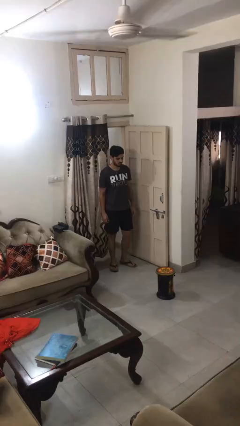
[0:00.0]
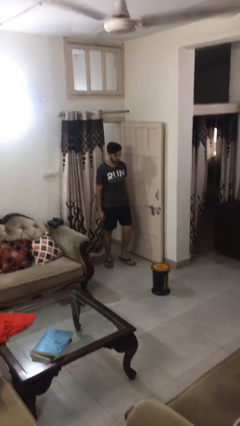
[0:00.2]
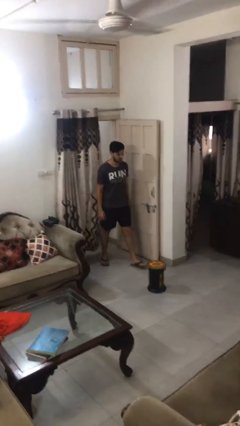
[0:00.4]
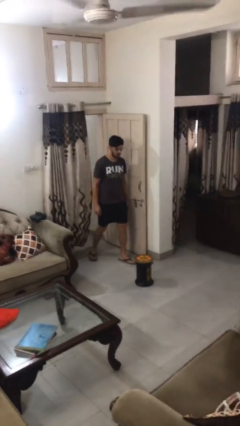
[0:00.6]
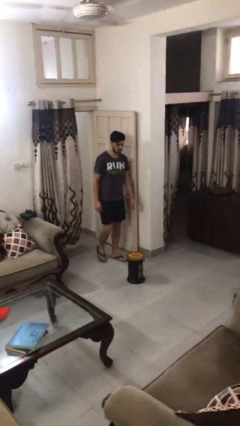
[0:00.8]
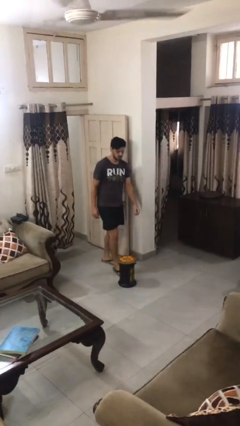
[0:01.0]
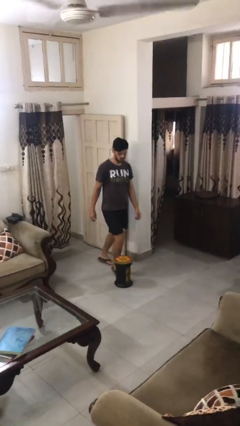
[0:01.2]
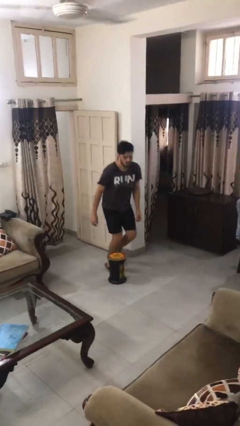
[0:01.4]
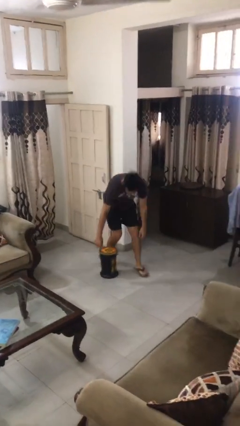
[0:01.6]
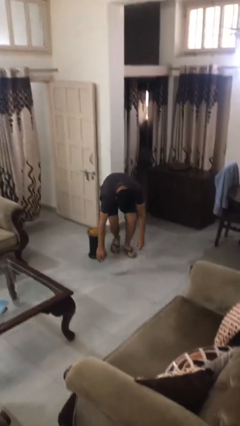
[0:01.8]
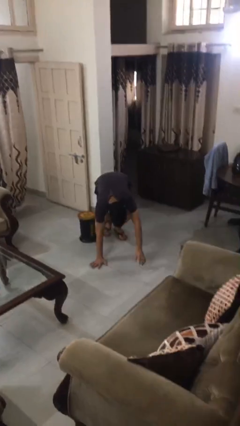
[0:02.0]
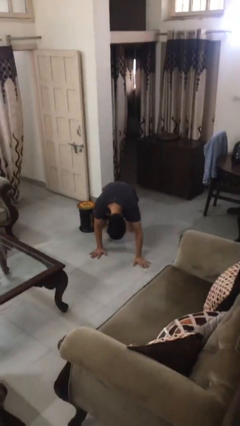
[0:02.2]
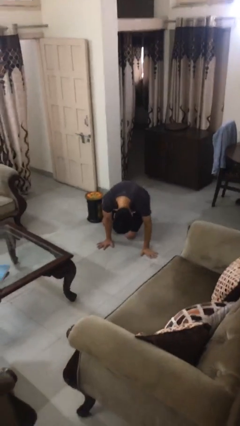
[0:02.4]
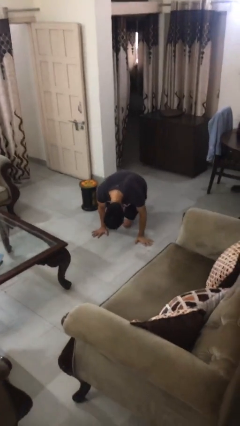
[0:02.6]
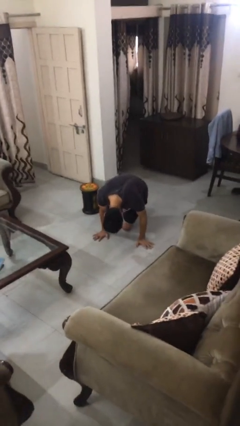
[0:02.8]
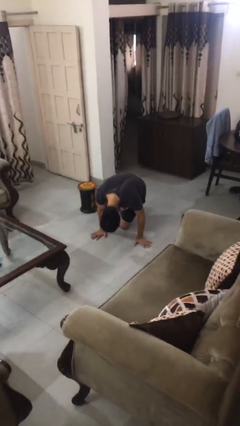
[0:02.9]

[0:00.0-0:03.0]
person trips on object on floor

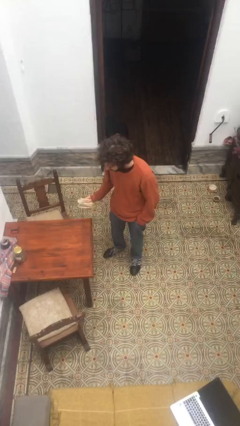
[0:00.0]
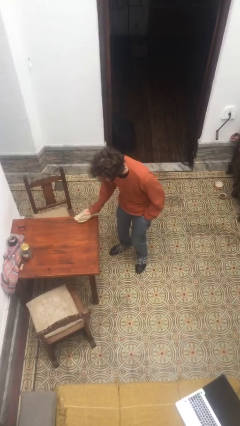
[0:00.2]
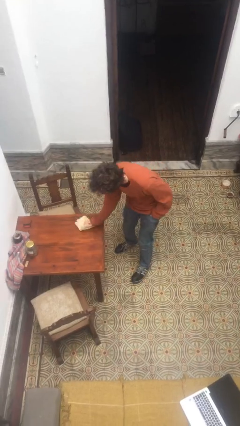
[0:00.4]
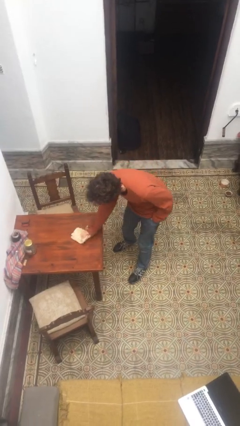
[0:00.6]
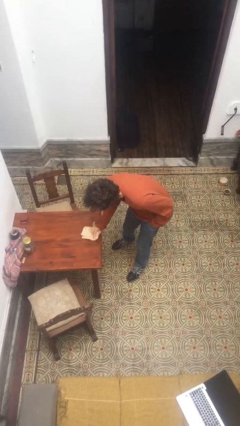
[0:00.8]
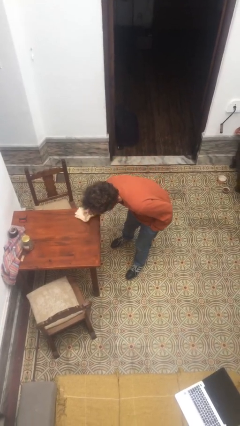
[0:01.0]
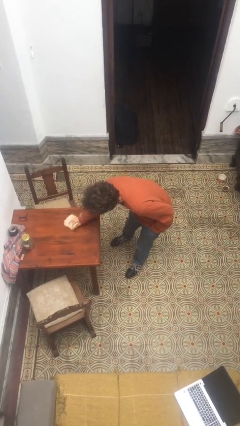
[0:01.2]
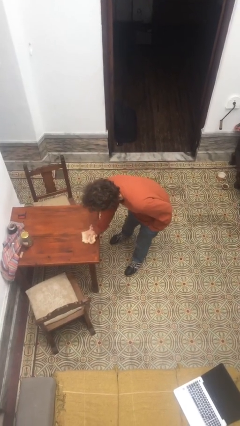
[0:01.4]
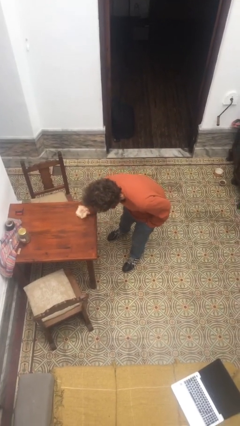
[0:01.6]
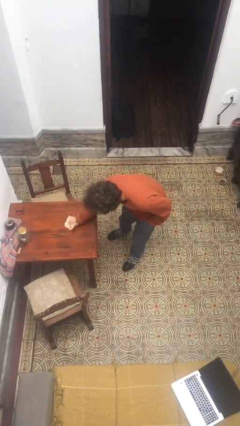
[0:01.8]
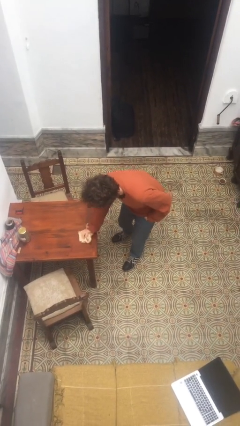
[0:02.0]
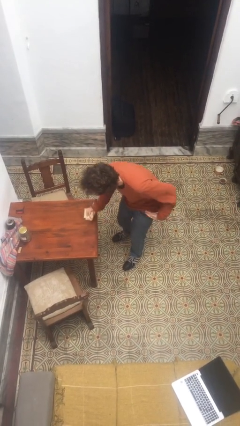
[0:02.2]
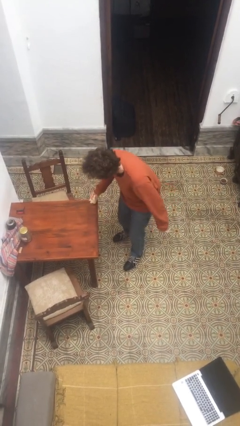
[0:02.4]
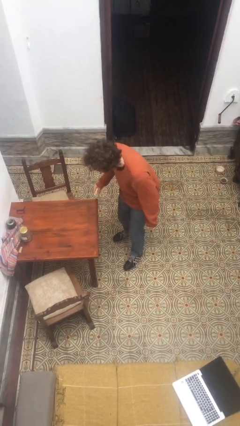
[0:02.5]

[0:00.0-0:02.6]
person cleans table with rag

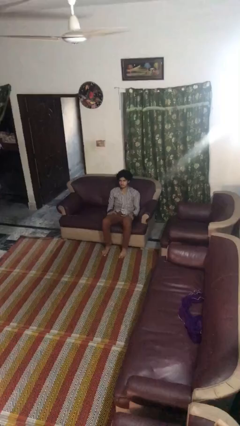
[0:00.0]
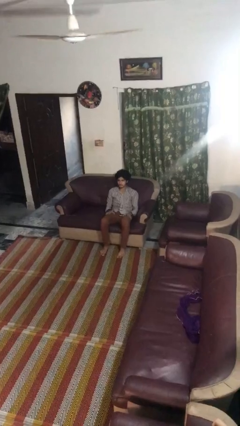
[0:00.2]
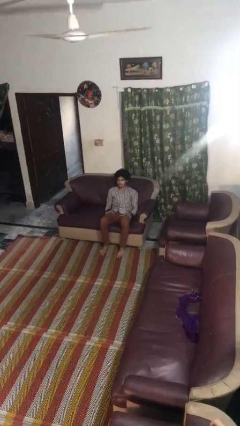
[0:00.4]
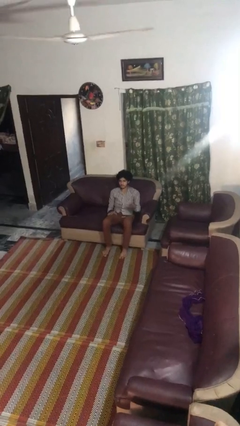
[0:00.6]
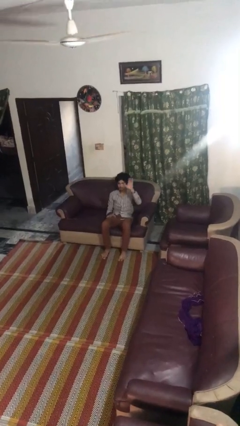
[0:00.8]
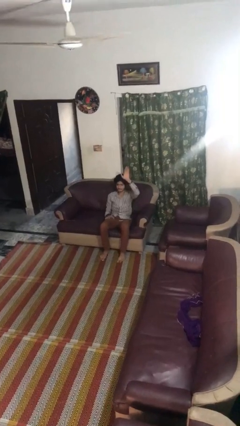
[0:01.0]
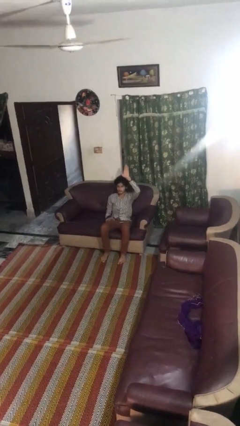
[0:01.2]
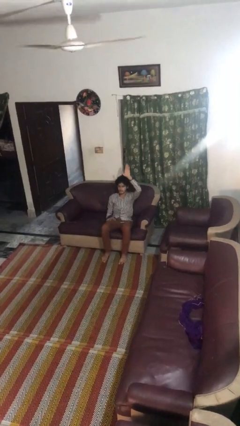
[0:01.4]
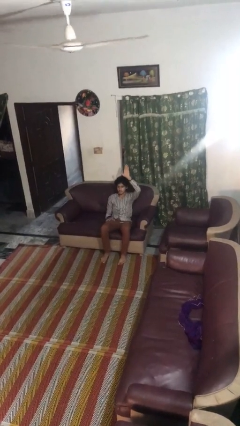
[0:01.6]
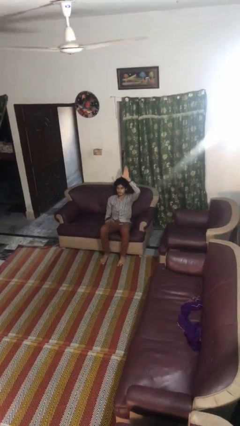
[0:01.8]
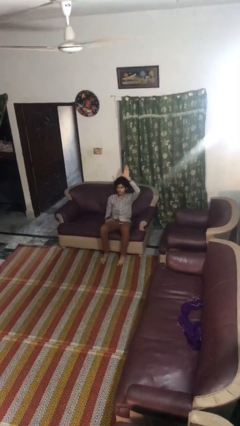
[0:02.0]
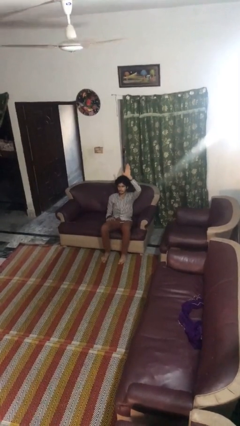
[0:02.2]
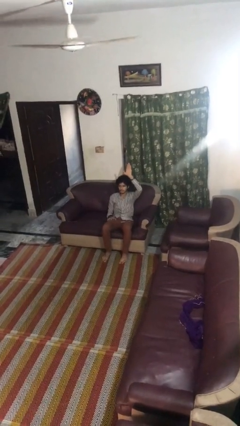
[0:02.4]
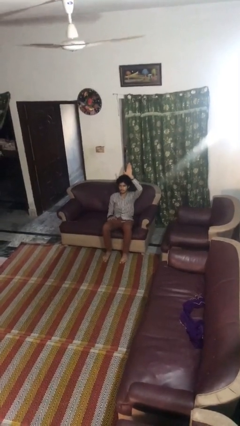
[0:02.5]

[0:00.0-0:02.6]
person gestures raise hand

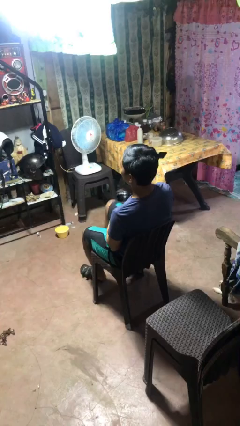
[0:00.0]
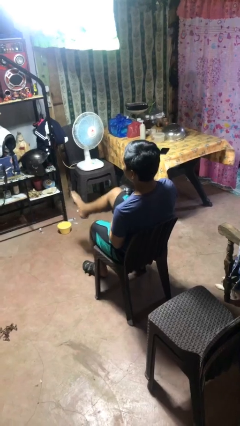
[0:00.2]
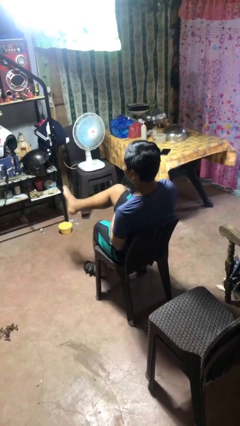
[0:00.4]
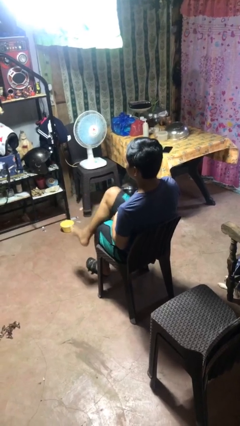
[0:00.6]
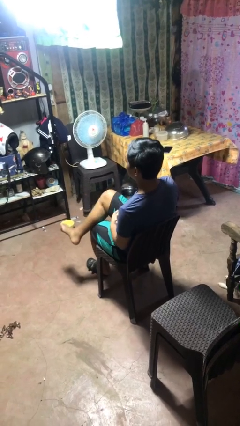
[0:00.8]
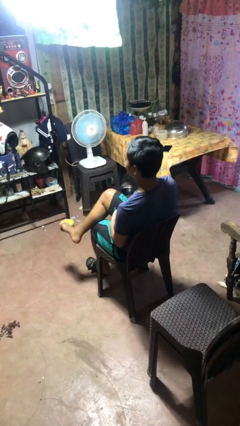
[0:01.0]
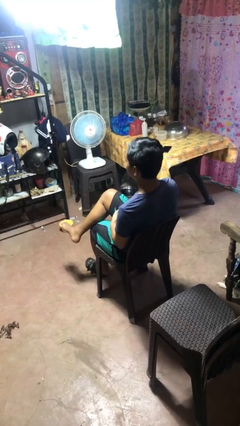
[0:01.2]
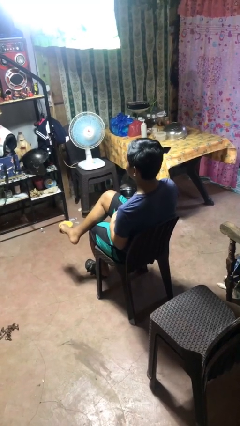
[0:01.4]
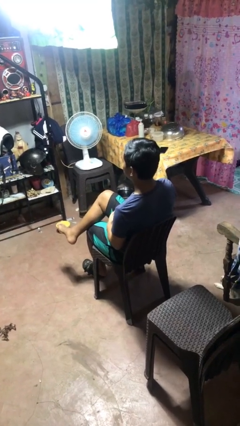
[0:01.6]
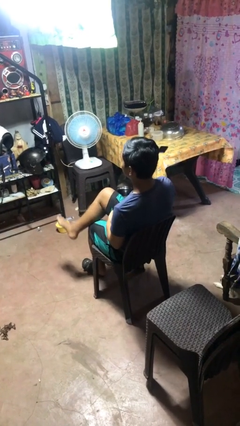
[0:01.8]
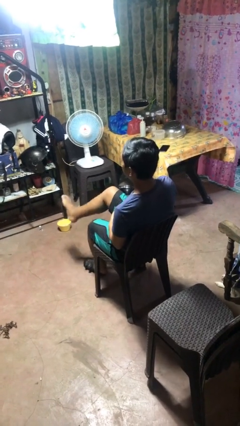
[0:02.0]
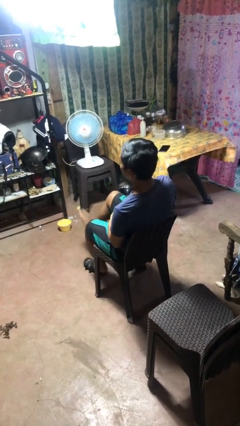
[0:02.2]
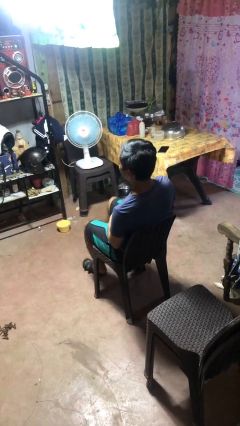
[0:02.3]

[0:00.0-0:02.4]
person crosses legs

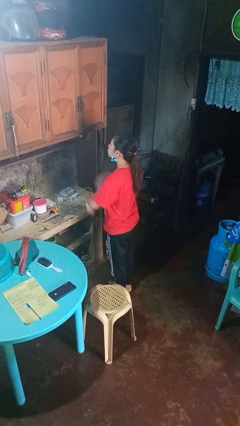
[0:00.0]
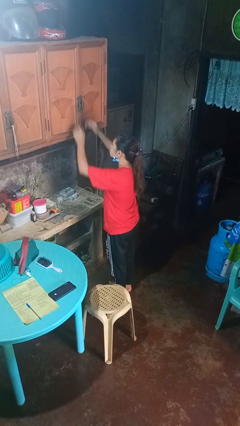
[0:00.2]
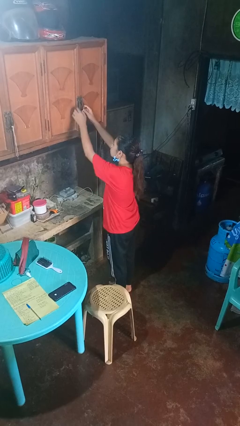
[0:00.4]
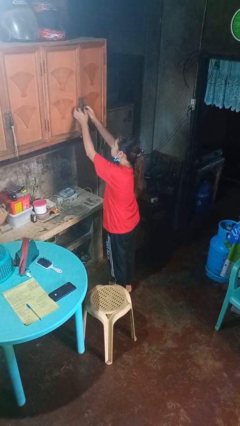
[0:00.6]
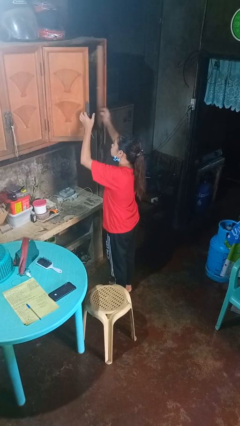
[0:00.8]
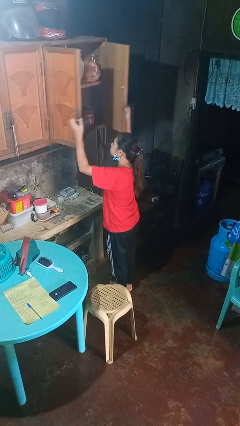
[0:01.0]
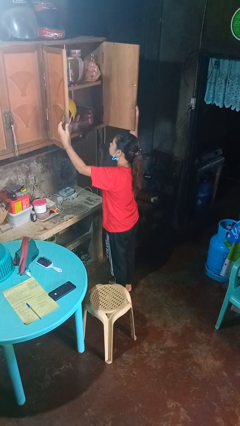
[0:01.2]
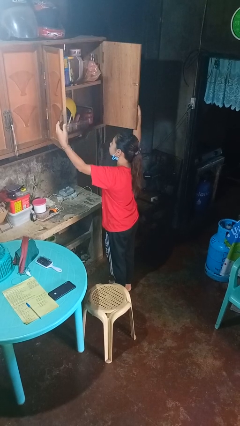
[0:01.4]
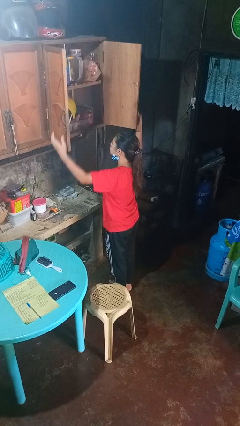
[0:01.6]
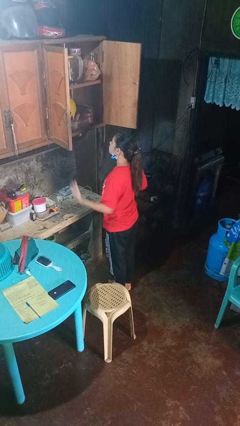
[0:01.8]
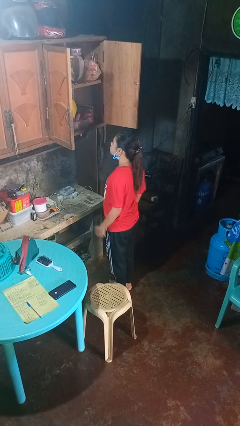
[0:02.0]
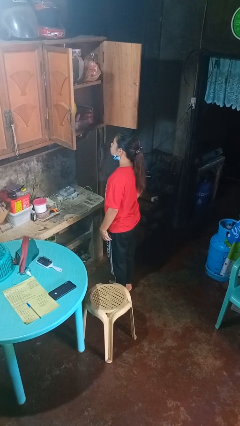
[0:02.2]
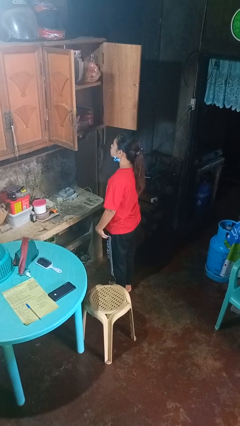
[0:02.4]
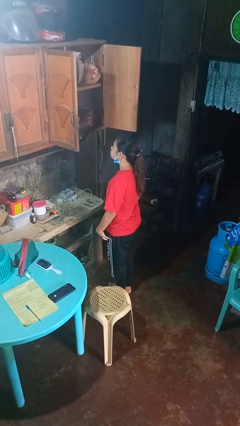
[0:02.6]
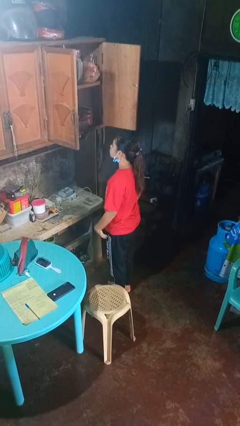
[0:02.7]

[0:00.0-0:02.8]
person opens cabinet

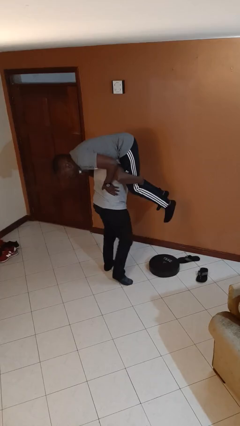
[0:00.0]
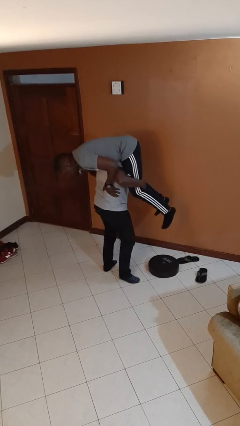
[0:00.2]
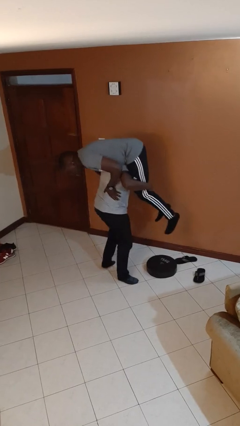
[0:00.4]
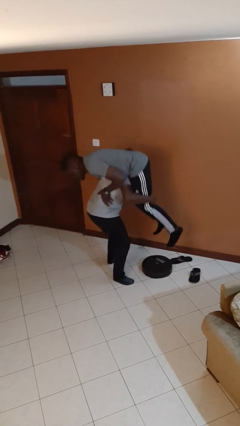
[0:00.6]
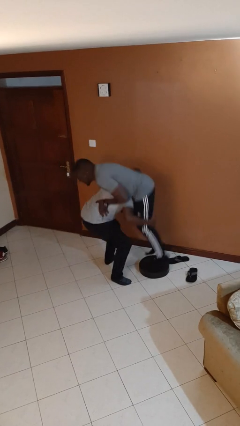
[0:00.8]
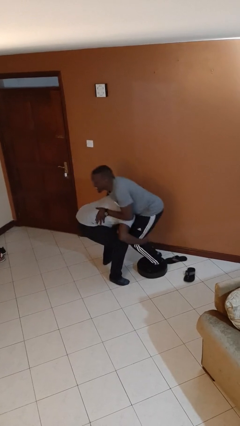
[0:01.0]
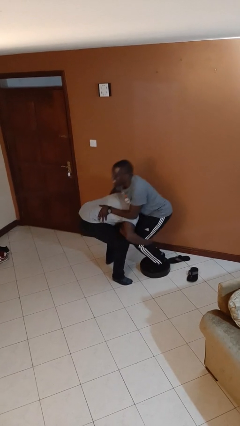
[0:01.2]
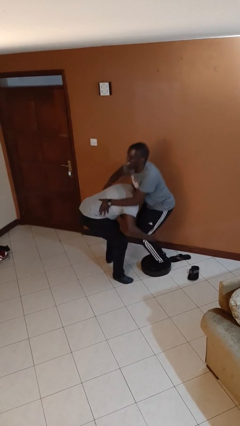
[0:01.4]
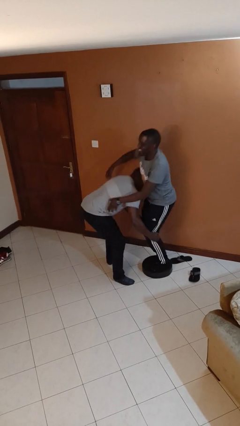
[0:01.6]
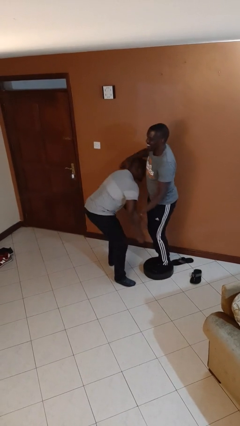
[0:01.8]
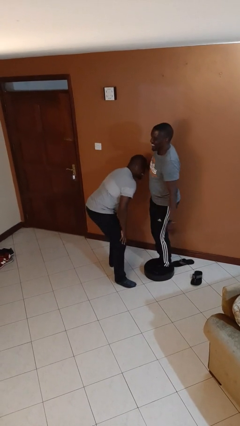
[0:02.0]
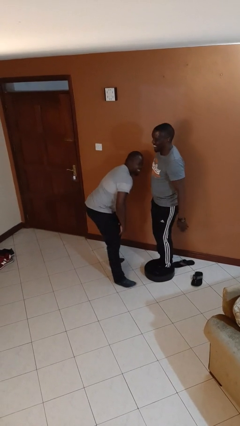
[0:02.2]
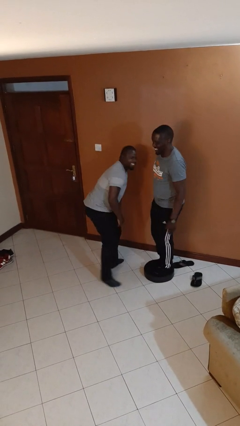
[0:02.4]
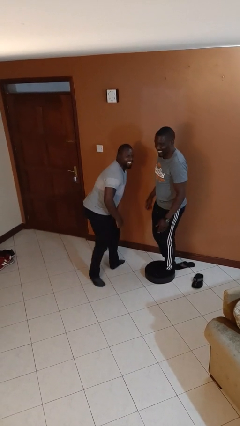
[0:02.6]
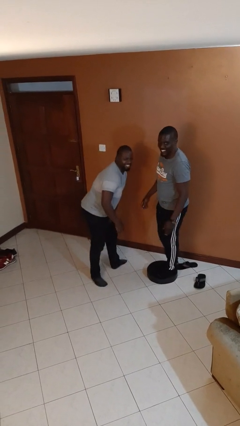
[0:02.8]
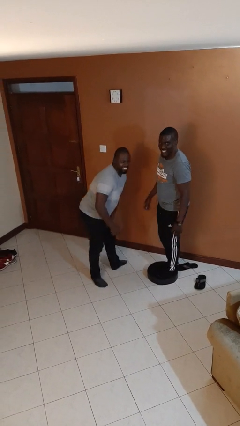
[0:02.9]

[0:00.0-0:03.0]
person puts down person

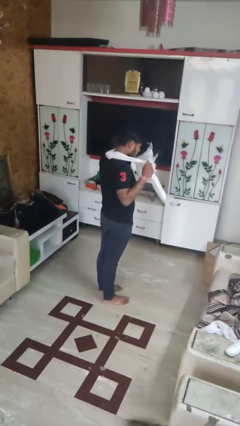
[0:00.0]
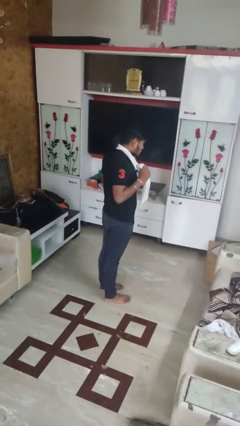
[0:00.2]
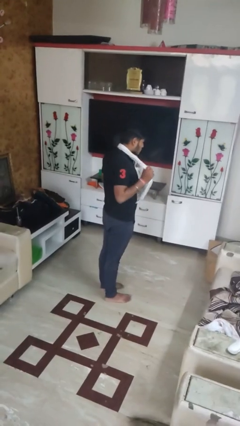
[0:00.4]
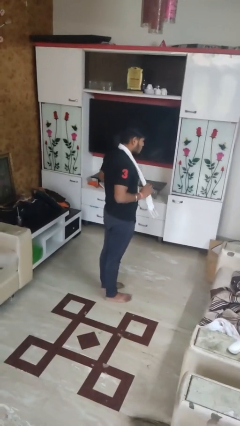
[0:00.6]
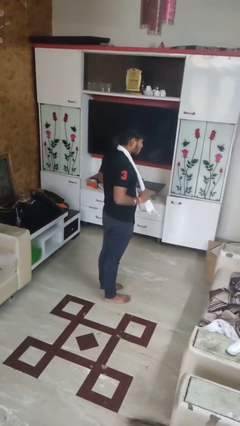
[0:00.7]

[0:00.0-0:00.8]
person puts on scarf
